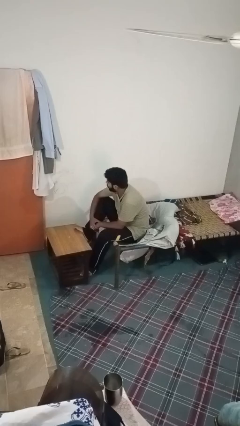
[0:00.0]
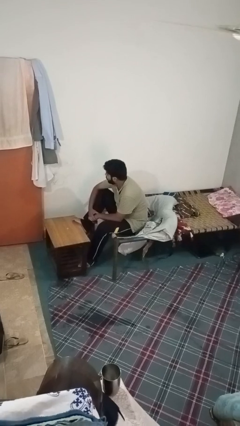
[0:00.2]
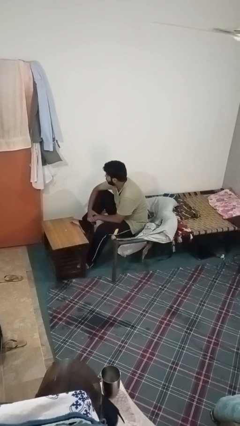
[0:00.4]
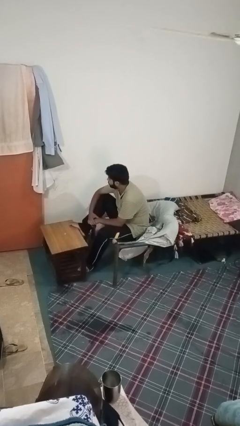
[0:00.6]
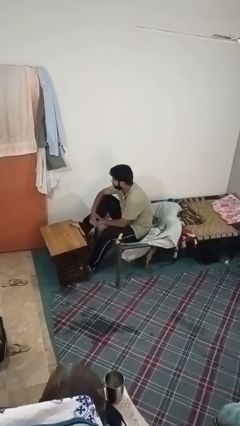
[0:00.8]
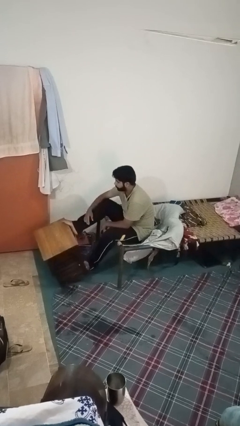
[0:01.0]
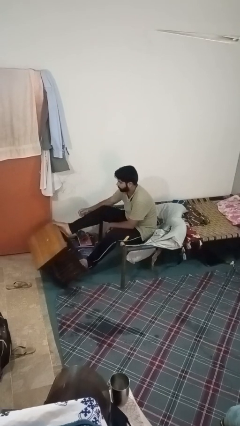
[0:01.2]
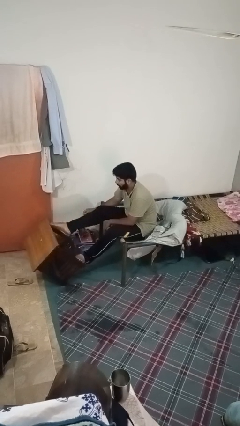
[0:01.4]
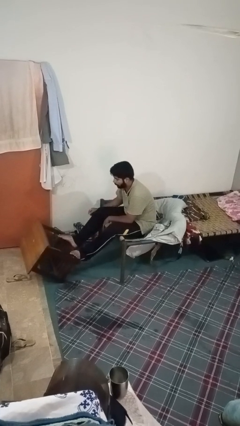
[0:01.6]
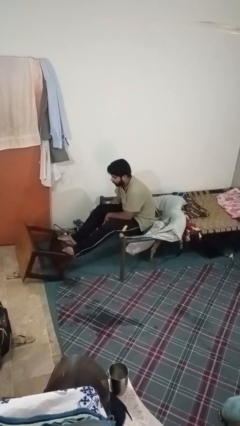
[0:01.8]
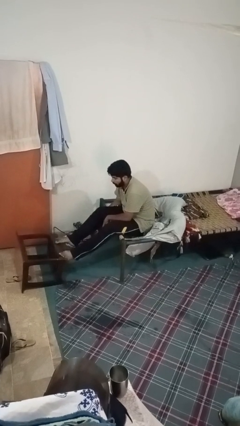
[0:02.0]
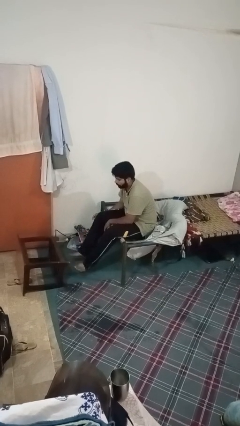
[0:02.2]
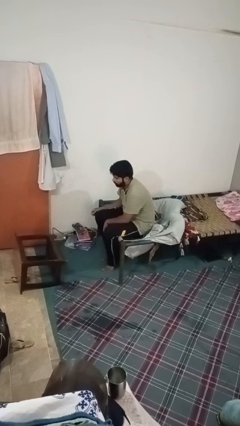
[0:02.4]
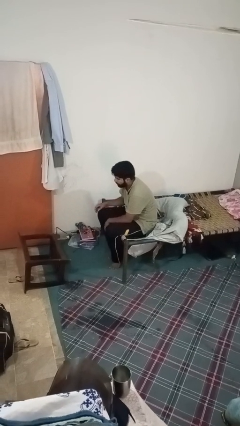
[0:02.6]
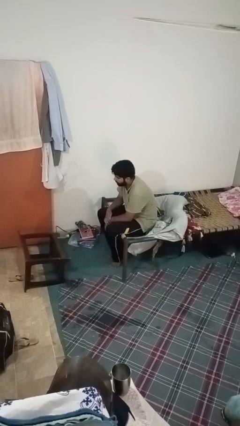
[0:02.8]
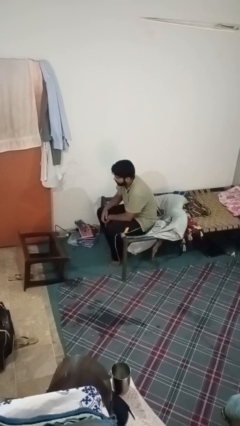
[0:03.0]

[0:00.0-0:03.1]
person knocks over furniture

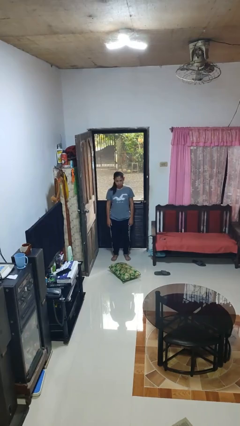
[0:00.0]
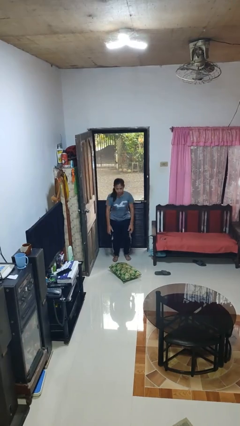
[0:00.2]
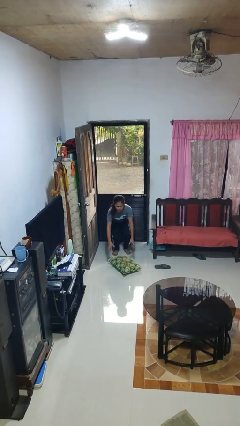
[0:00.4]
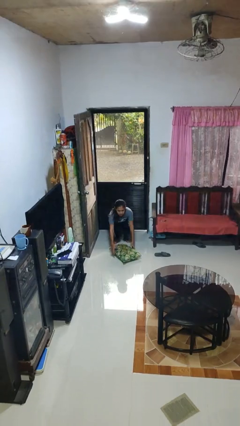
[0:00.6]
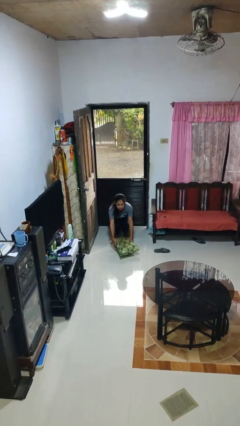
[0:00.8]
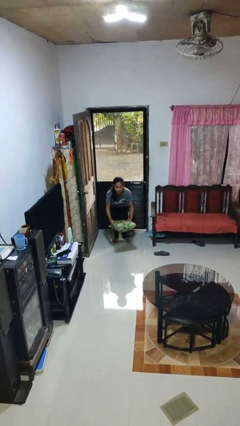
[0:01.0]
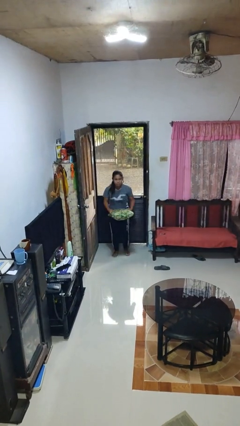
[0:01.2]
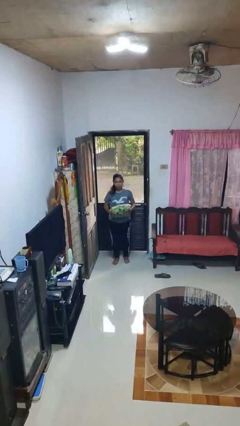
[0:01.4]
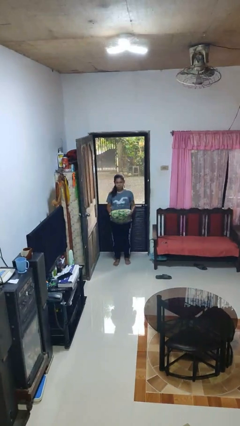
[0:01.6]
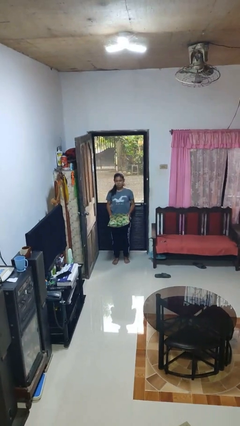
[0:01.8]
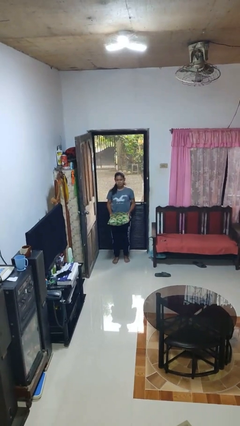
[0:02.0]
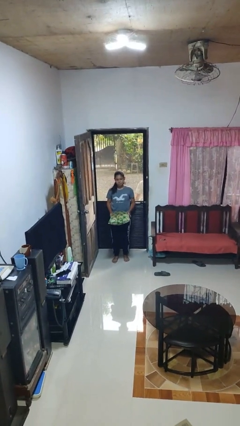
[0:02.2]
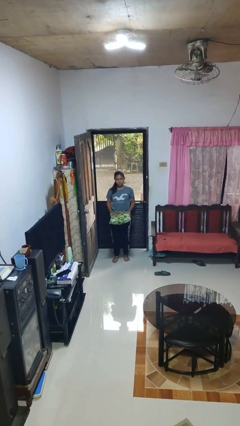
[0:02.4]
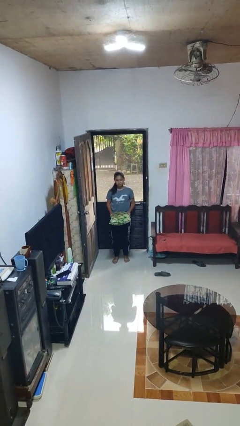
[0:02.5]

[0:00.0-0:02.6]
person picks up object from floor

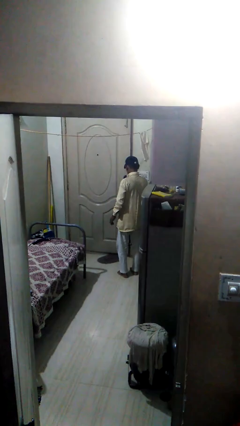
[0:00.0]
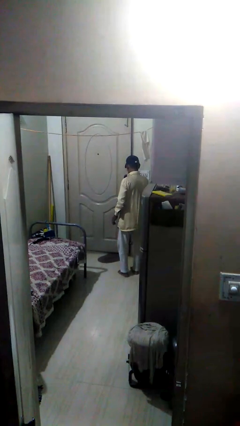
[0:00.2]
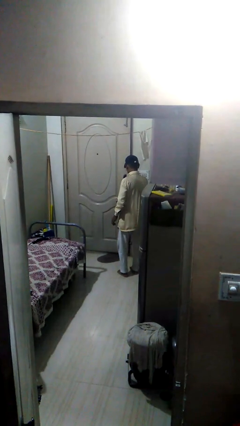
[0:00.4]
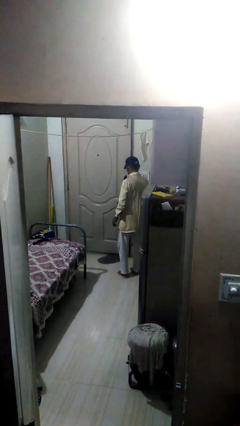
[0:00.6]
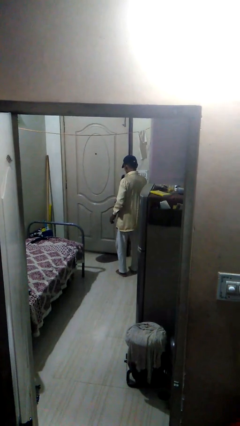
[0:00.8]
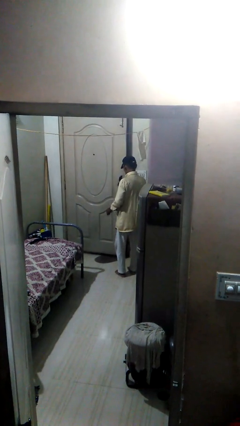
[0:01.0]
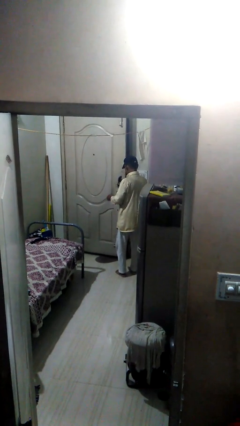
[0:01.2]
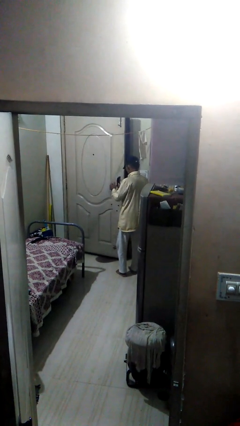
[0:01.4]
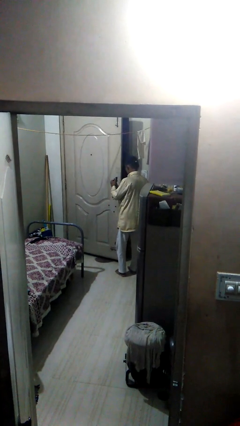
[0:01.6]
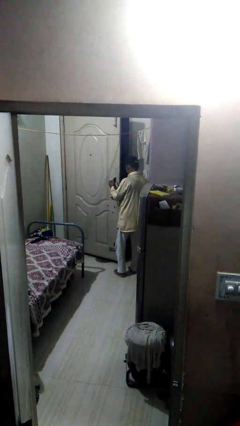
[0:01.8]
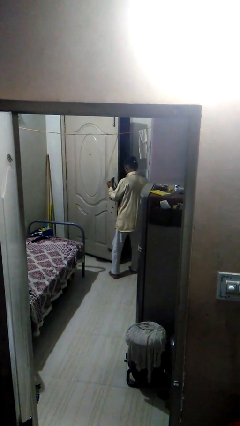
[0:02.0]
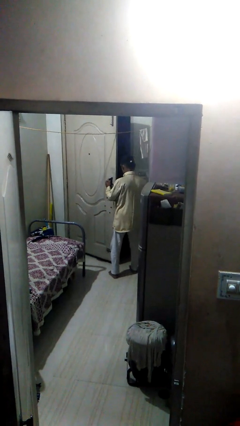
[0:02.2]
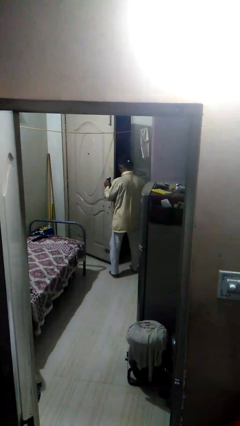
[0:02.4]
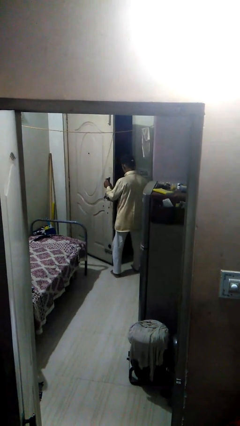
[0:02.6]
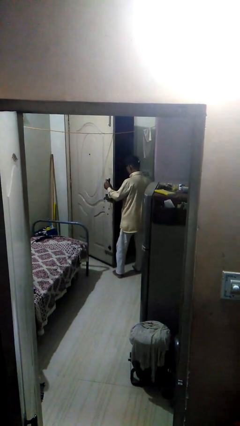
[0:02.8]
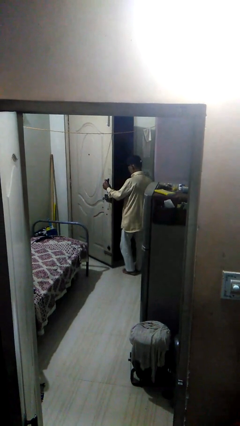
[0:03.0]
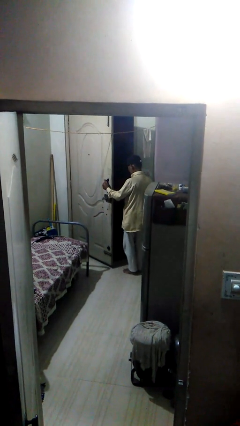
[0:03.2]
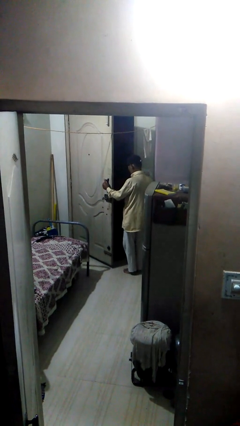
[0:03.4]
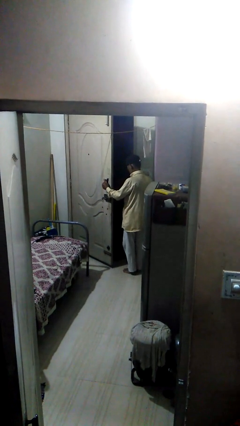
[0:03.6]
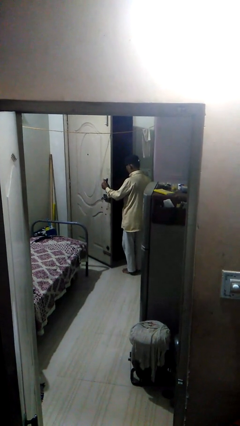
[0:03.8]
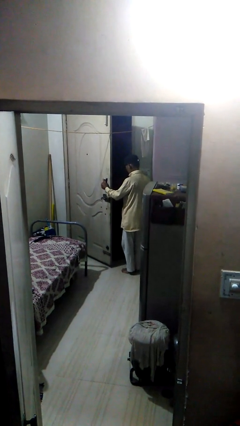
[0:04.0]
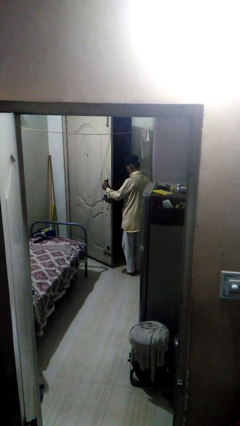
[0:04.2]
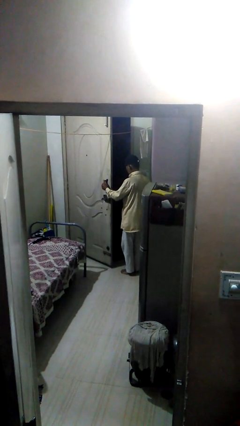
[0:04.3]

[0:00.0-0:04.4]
person opens facility door

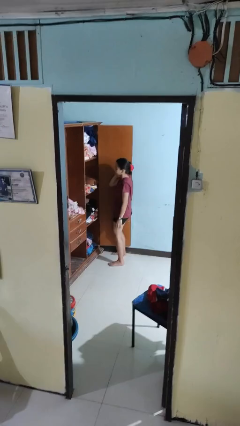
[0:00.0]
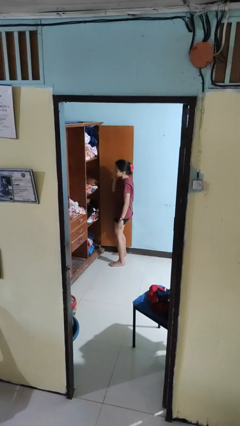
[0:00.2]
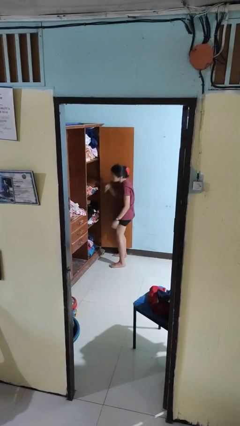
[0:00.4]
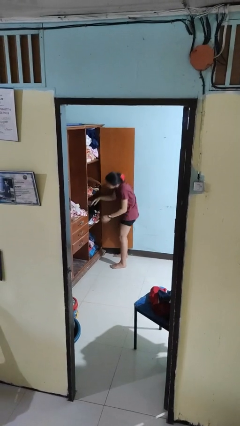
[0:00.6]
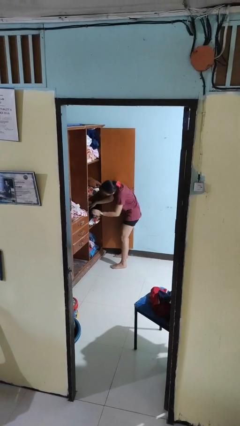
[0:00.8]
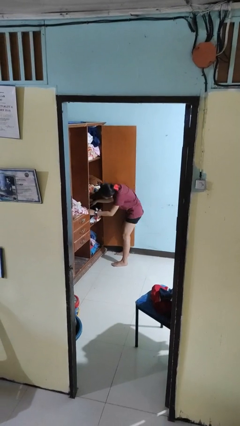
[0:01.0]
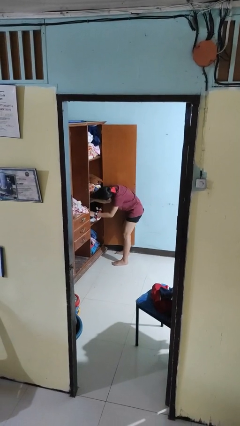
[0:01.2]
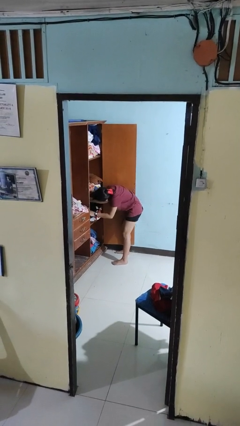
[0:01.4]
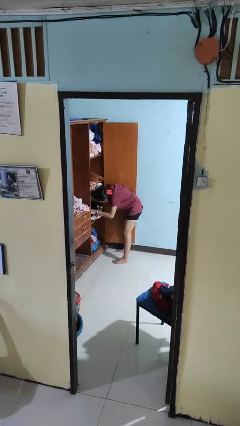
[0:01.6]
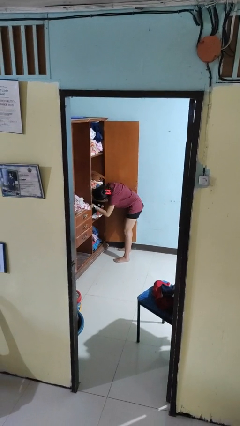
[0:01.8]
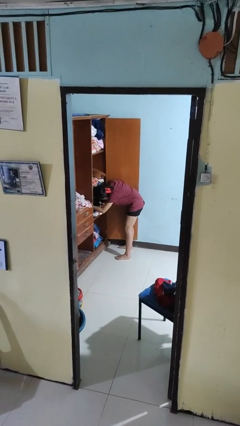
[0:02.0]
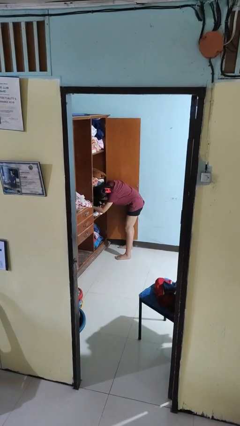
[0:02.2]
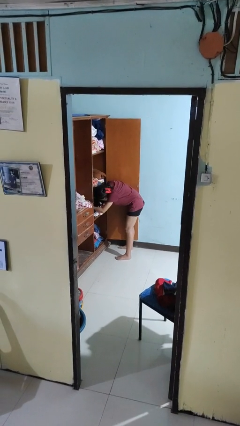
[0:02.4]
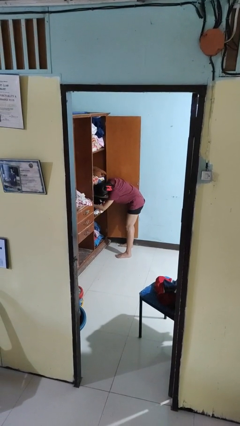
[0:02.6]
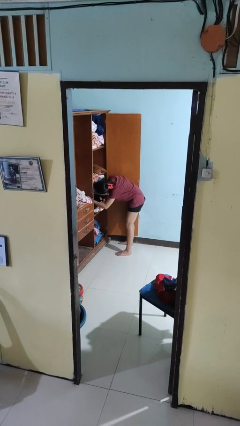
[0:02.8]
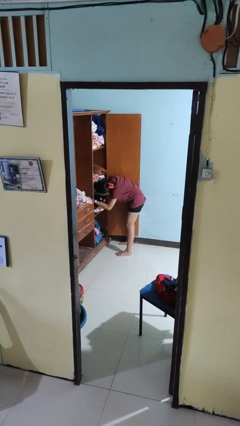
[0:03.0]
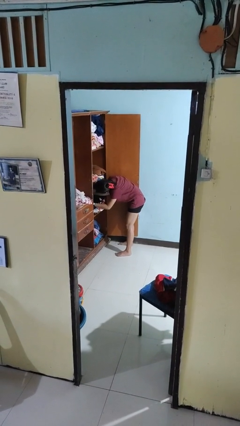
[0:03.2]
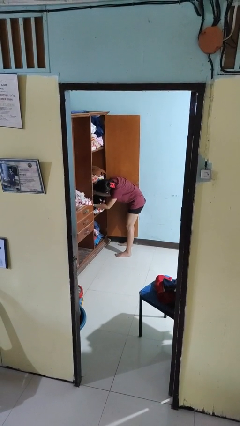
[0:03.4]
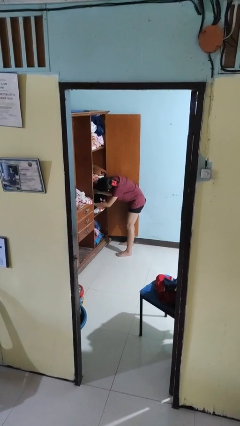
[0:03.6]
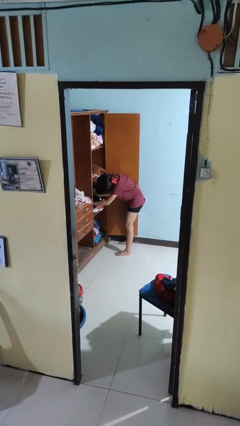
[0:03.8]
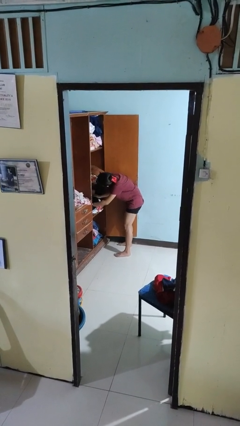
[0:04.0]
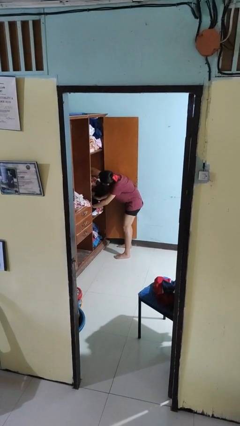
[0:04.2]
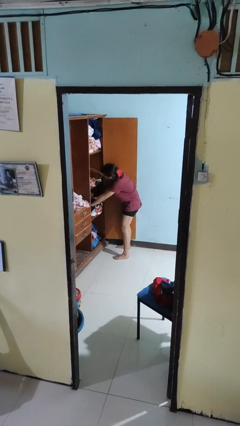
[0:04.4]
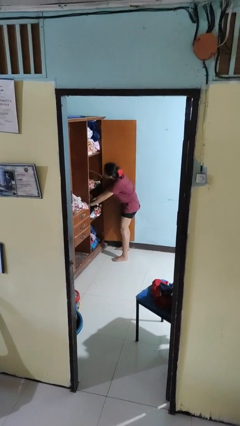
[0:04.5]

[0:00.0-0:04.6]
person searches in cabinet

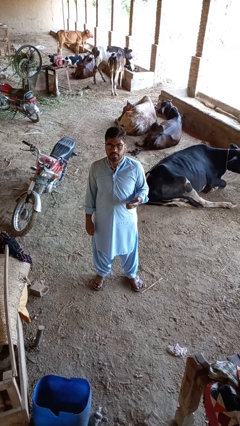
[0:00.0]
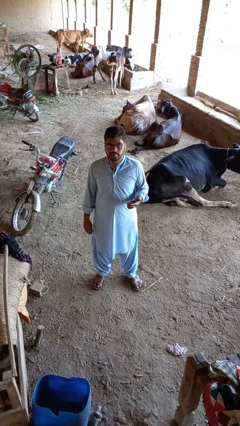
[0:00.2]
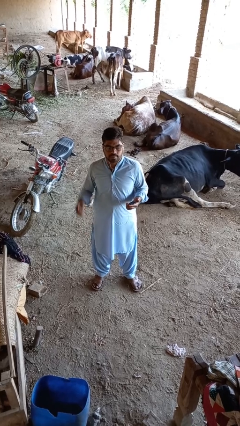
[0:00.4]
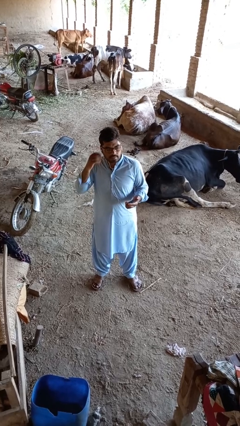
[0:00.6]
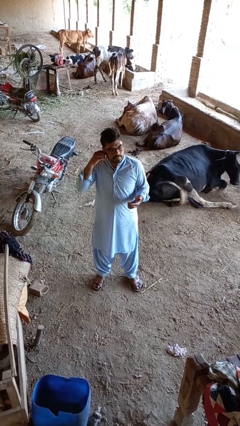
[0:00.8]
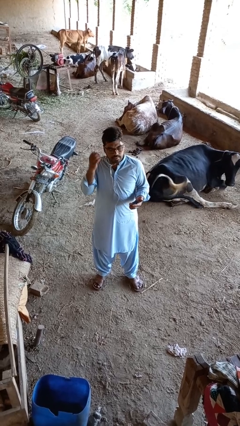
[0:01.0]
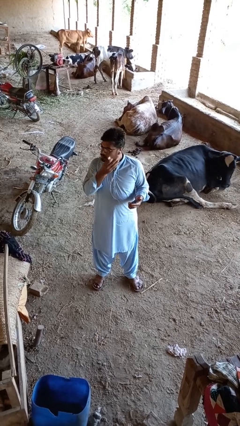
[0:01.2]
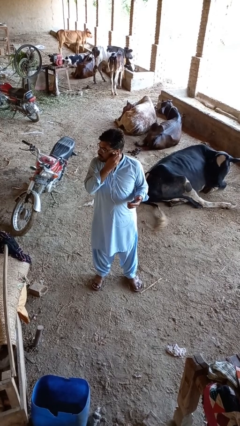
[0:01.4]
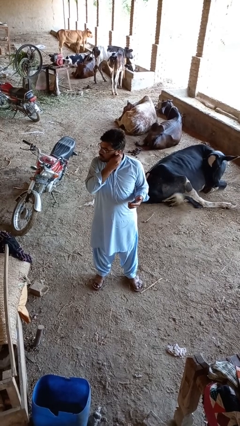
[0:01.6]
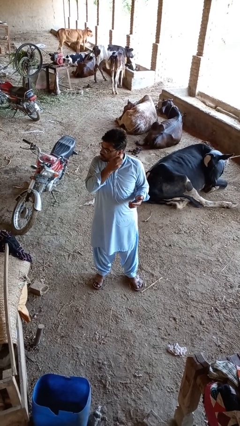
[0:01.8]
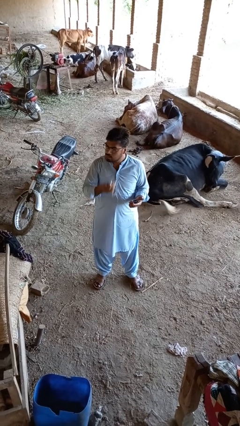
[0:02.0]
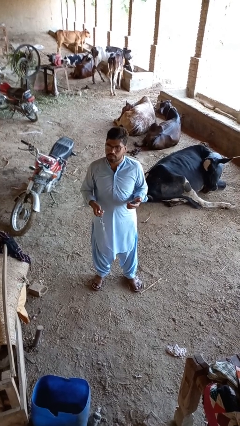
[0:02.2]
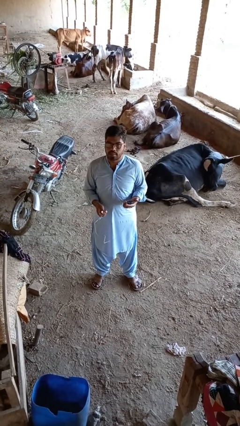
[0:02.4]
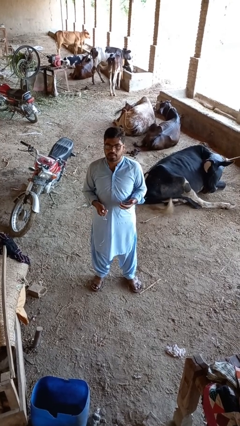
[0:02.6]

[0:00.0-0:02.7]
person takes off headphones

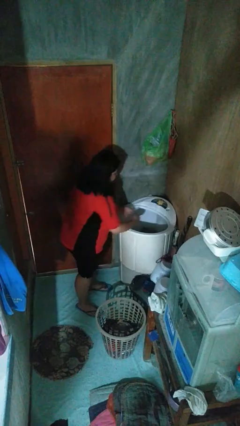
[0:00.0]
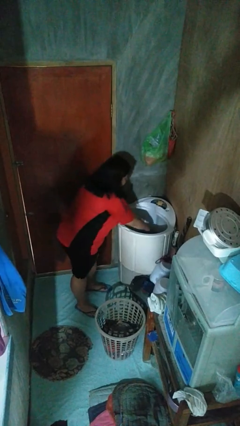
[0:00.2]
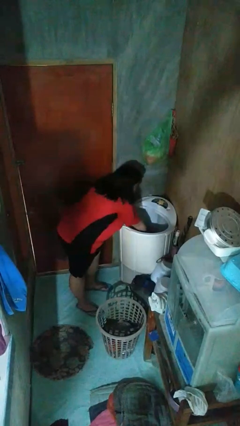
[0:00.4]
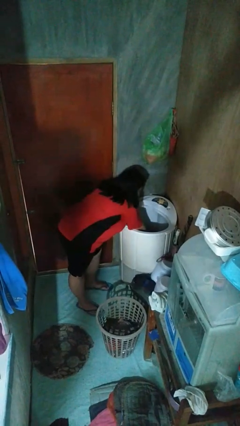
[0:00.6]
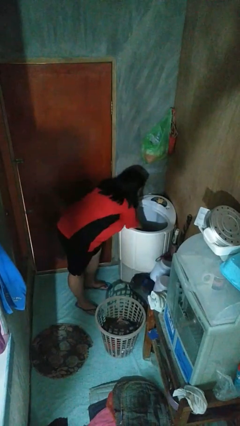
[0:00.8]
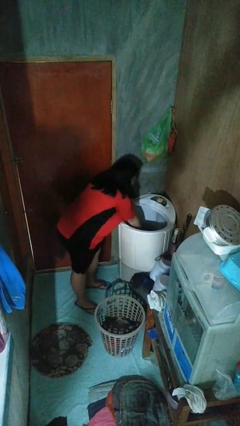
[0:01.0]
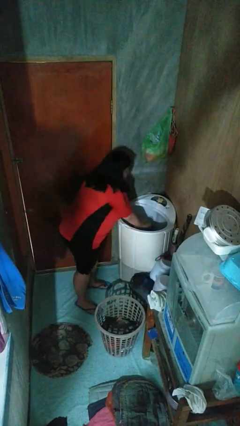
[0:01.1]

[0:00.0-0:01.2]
person loads clotheswasher
